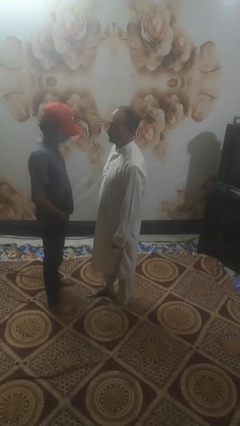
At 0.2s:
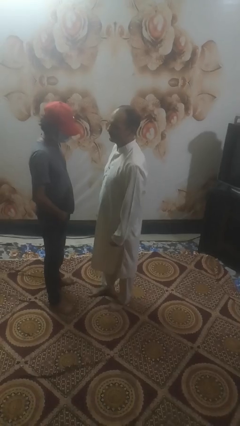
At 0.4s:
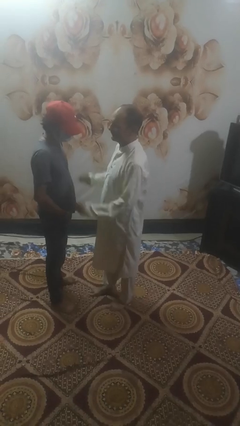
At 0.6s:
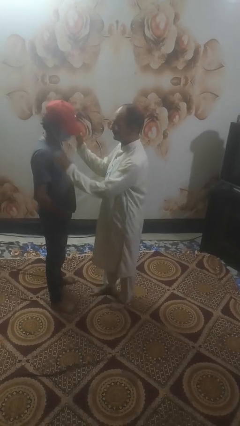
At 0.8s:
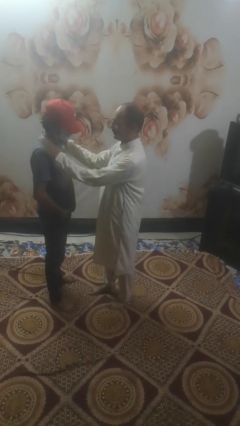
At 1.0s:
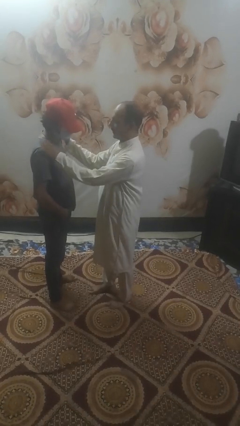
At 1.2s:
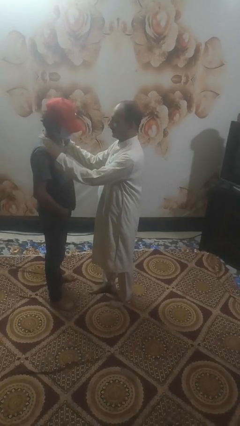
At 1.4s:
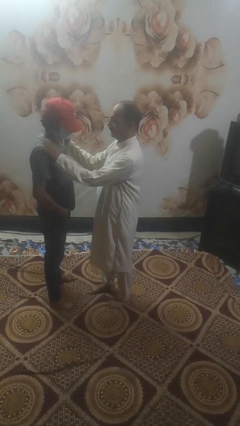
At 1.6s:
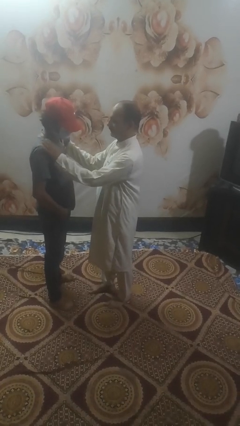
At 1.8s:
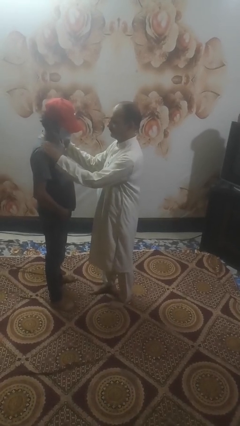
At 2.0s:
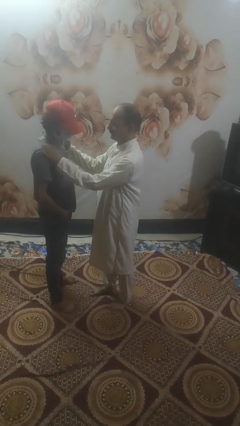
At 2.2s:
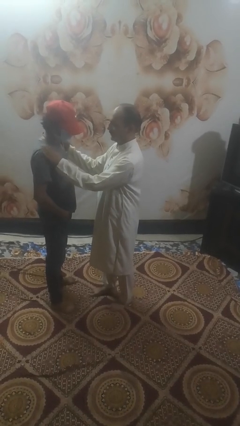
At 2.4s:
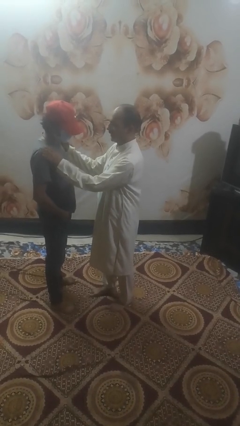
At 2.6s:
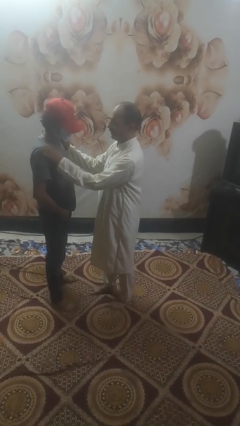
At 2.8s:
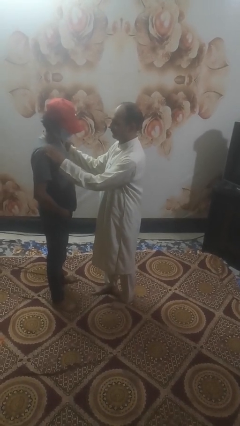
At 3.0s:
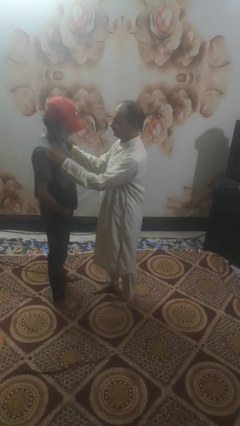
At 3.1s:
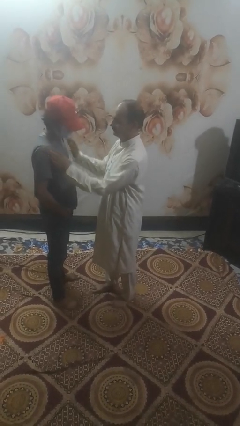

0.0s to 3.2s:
person pounds shoulders of person

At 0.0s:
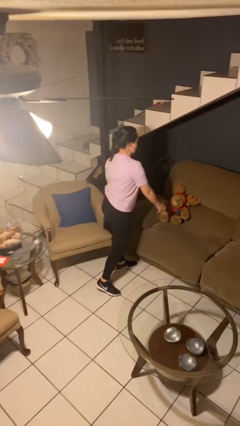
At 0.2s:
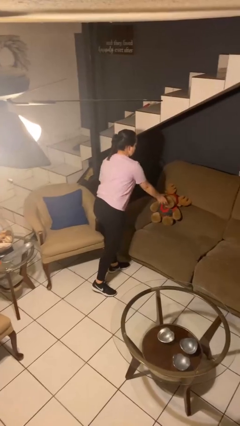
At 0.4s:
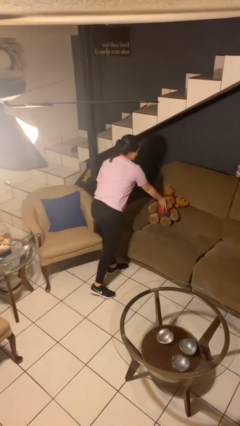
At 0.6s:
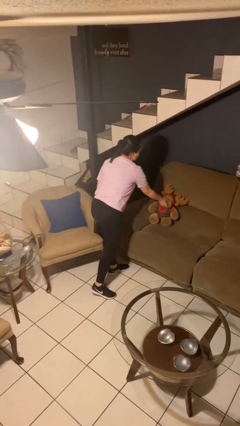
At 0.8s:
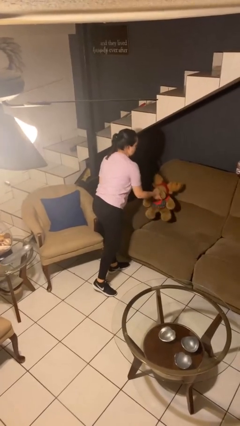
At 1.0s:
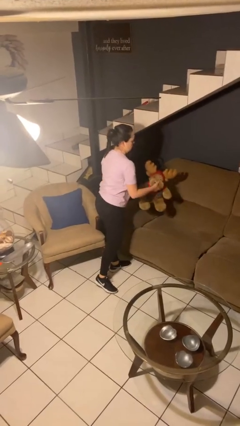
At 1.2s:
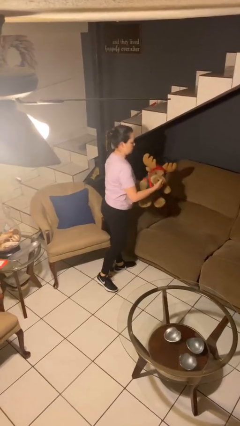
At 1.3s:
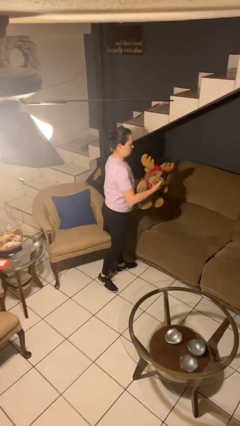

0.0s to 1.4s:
person picks up object from couch

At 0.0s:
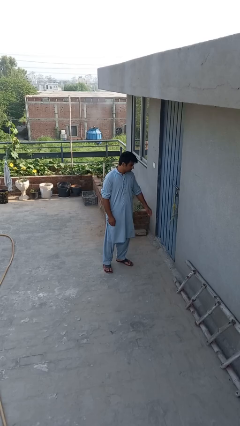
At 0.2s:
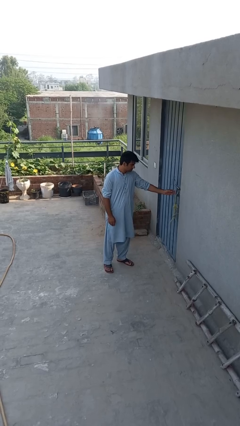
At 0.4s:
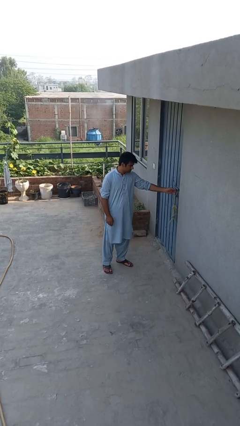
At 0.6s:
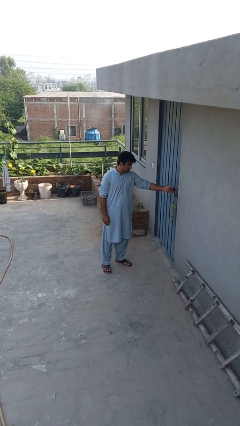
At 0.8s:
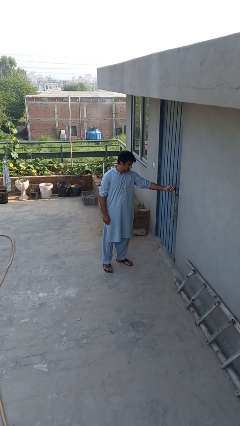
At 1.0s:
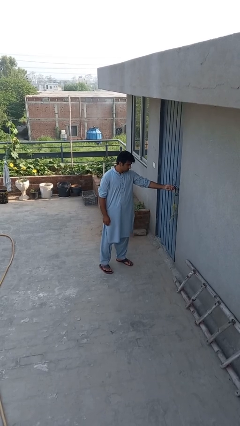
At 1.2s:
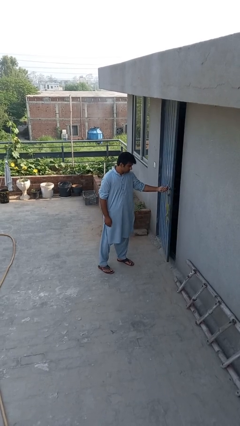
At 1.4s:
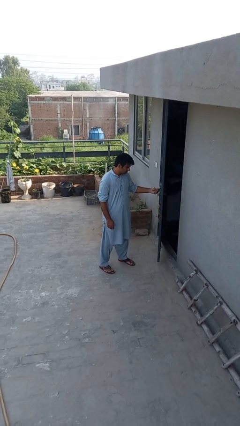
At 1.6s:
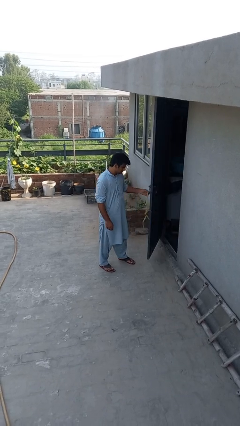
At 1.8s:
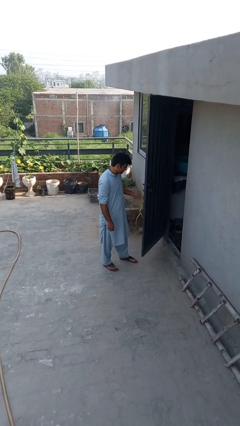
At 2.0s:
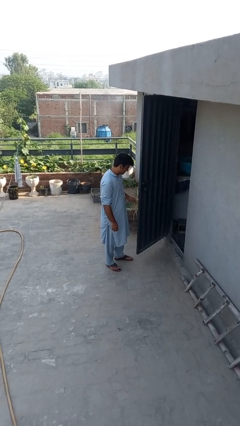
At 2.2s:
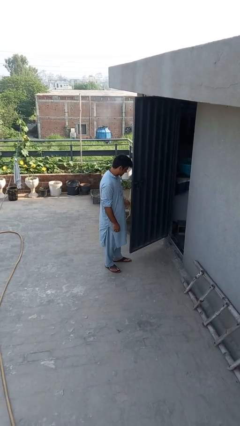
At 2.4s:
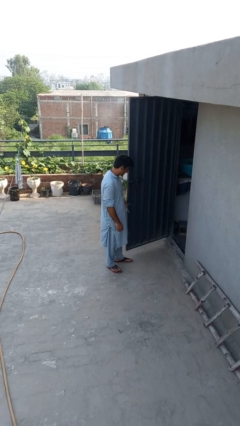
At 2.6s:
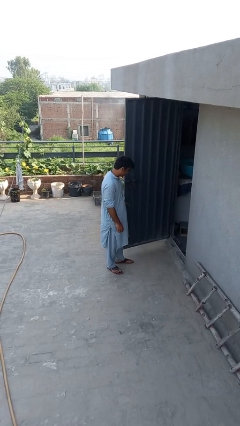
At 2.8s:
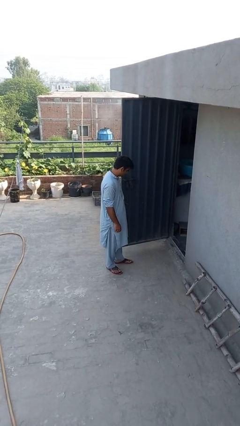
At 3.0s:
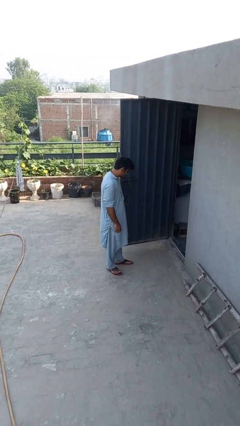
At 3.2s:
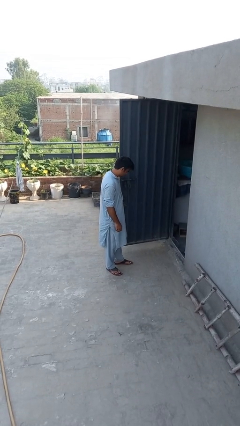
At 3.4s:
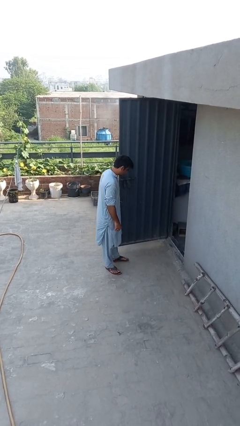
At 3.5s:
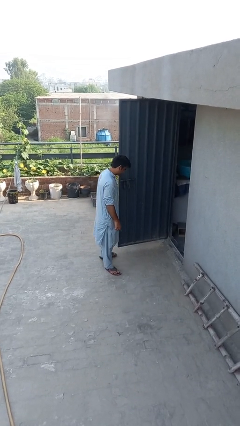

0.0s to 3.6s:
person opens facility door

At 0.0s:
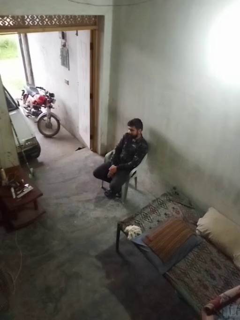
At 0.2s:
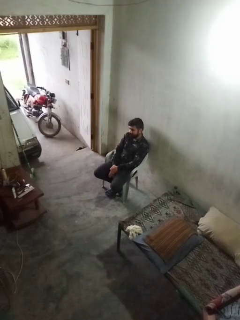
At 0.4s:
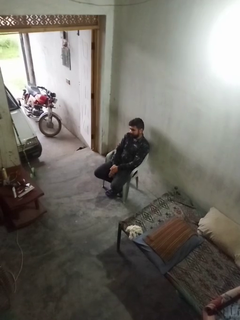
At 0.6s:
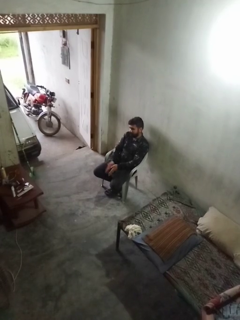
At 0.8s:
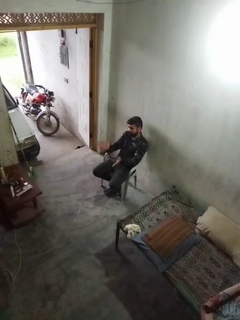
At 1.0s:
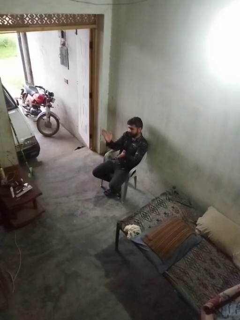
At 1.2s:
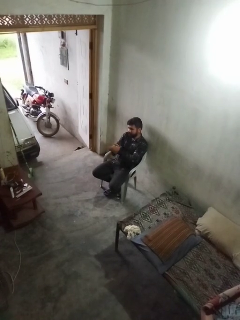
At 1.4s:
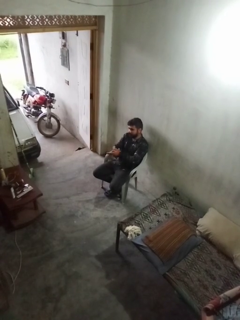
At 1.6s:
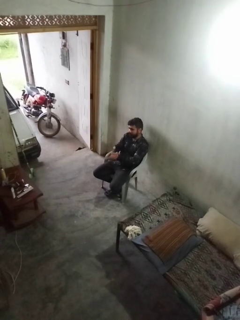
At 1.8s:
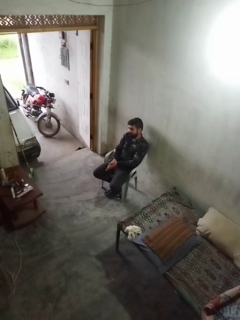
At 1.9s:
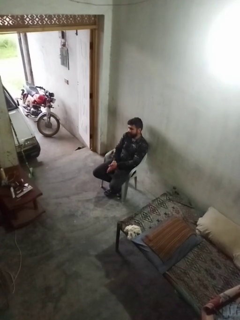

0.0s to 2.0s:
person claps hands

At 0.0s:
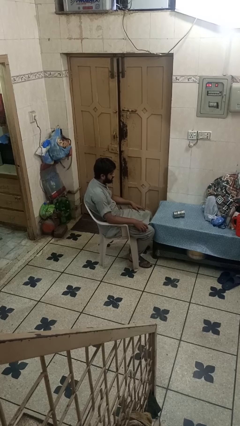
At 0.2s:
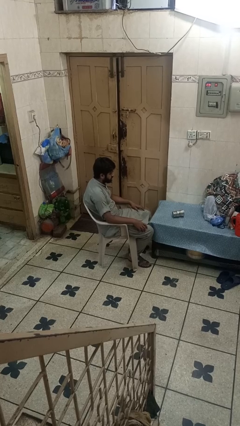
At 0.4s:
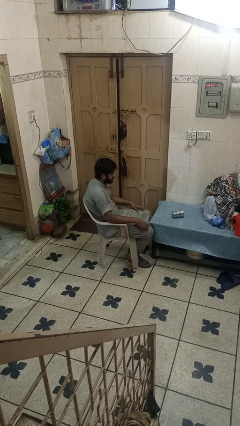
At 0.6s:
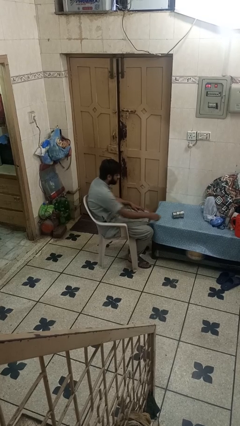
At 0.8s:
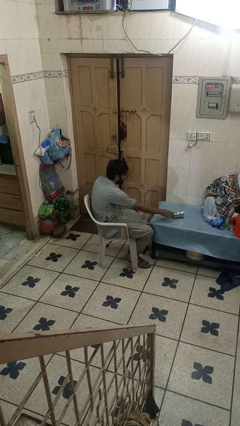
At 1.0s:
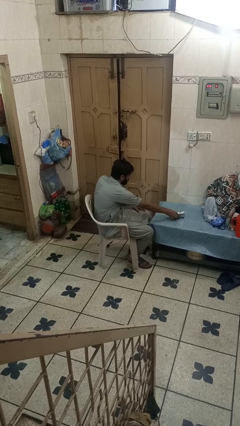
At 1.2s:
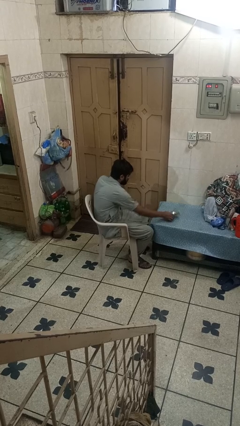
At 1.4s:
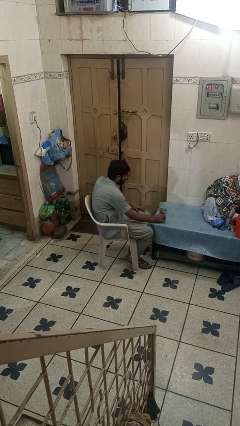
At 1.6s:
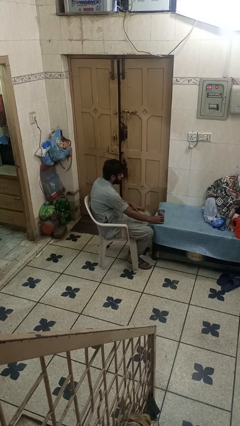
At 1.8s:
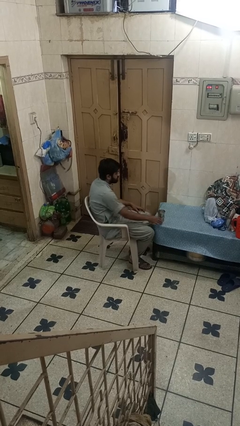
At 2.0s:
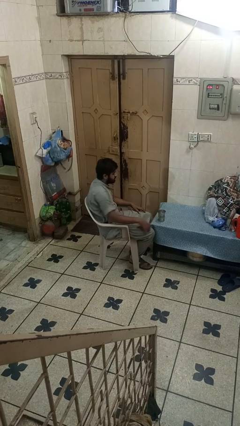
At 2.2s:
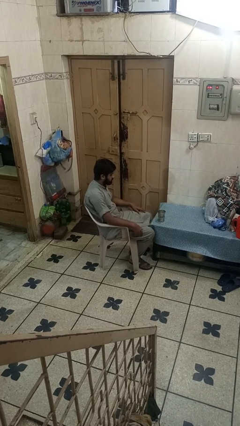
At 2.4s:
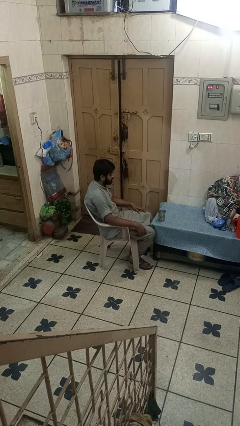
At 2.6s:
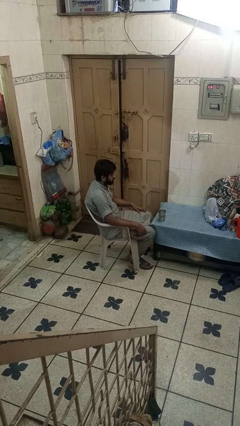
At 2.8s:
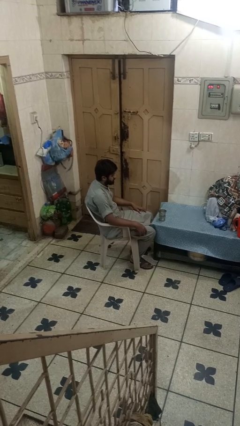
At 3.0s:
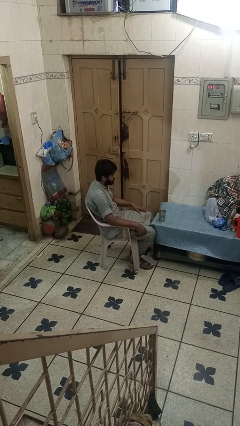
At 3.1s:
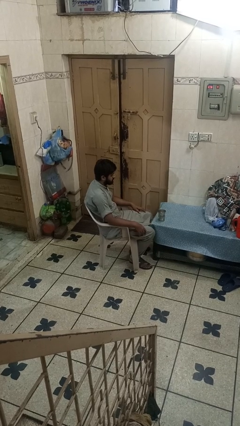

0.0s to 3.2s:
person sets upright glass

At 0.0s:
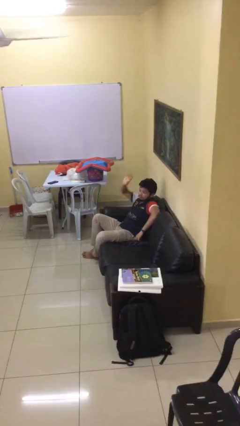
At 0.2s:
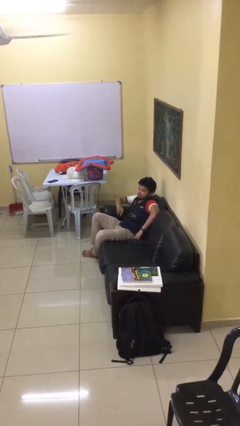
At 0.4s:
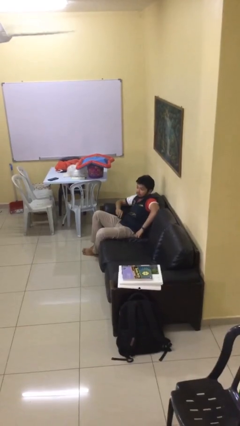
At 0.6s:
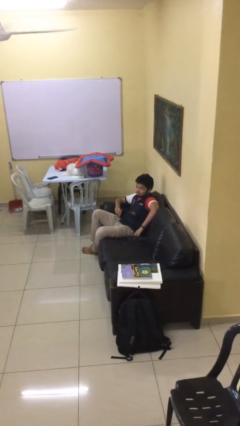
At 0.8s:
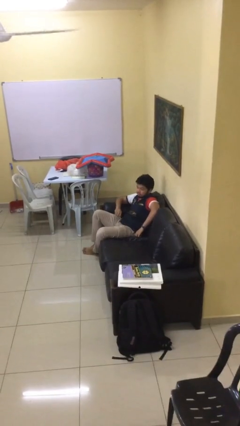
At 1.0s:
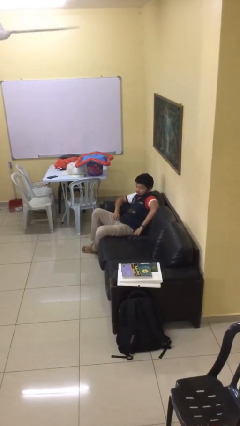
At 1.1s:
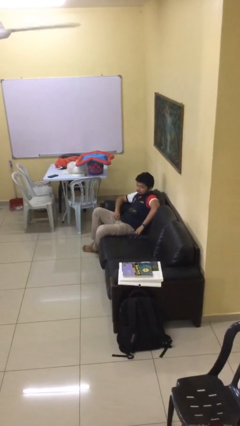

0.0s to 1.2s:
person gestures swipe down

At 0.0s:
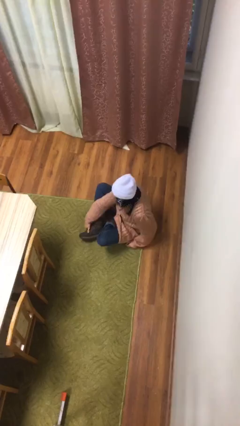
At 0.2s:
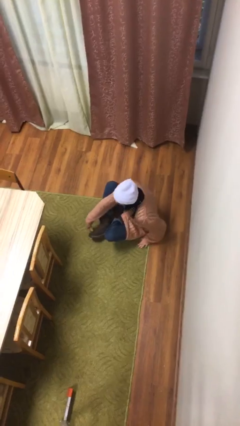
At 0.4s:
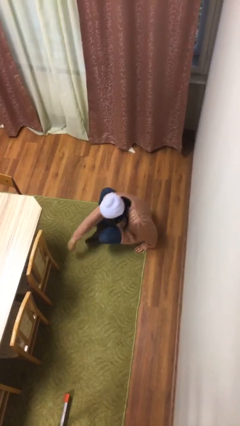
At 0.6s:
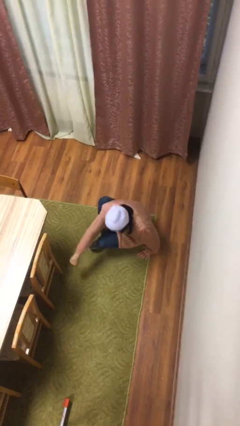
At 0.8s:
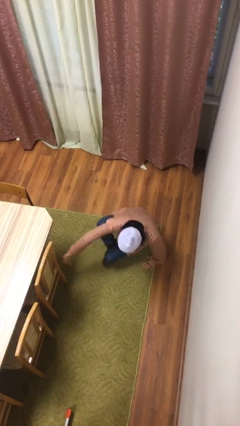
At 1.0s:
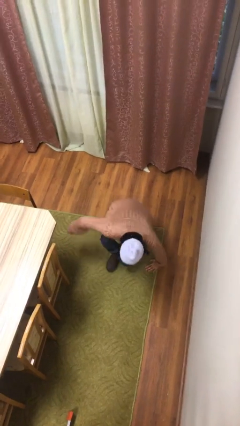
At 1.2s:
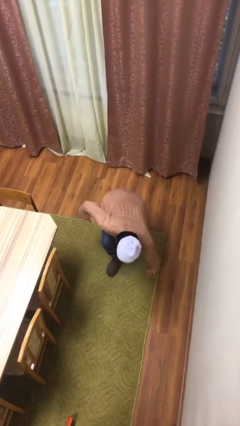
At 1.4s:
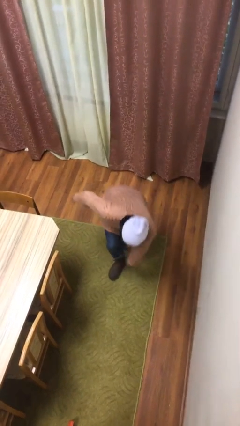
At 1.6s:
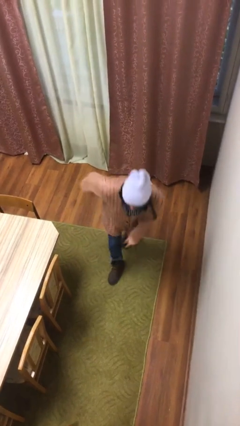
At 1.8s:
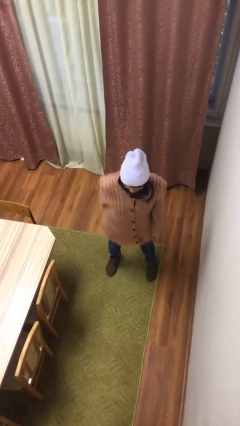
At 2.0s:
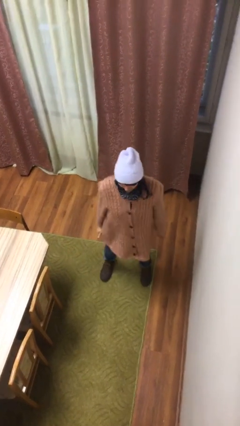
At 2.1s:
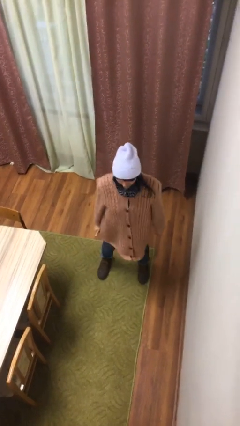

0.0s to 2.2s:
person stands up

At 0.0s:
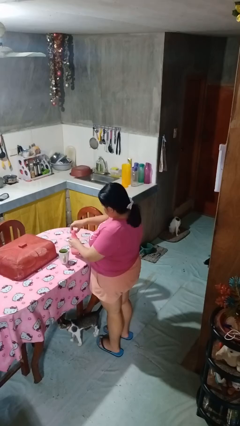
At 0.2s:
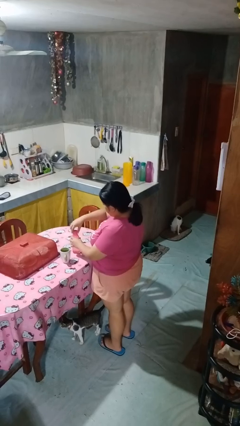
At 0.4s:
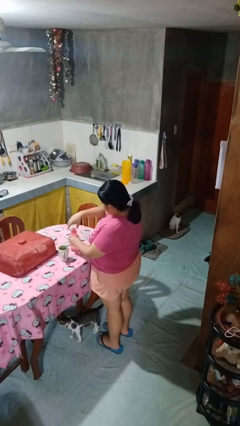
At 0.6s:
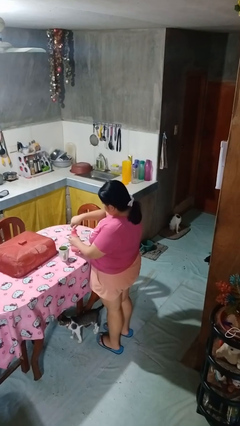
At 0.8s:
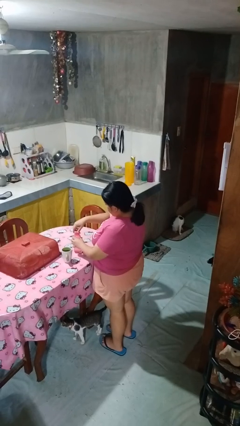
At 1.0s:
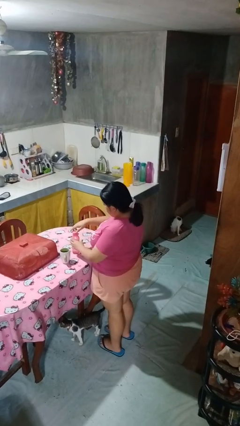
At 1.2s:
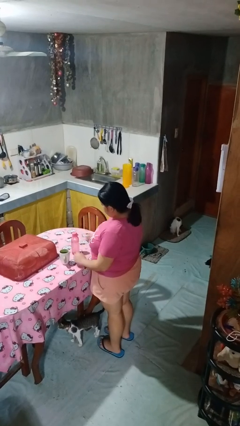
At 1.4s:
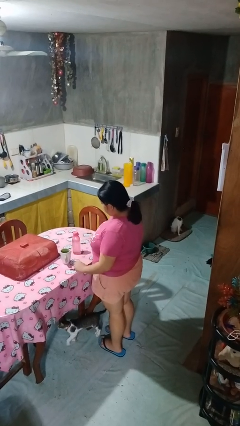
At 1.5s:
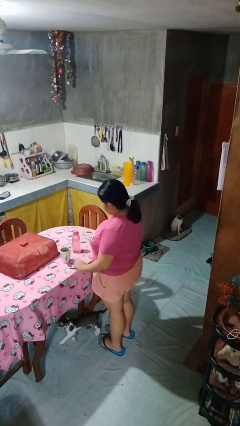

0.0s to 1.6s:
person screws lid to bottle
